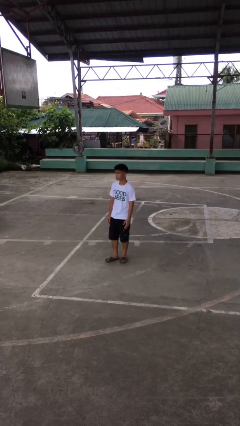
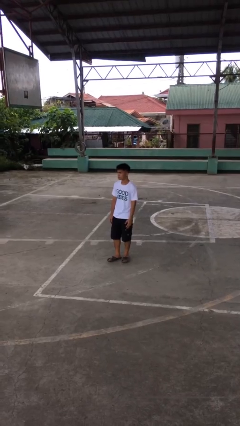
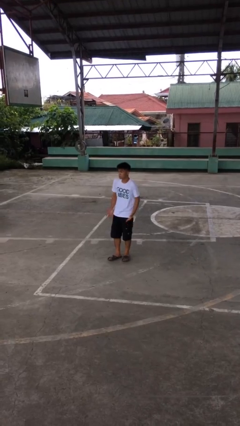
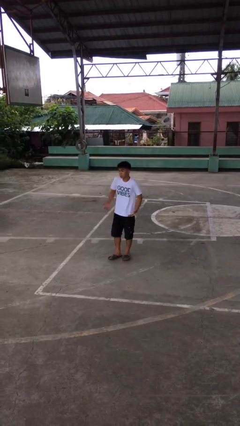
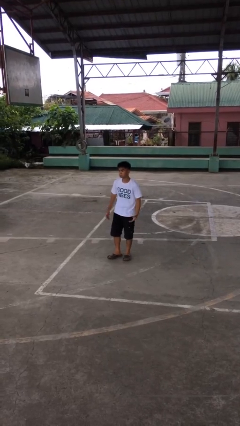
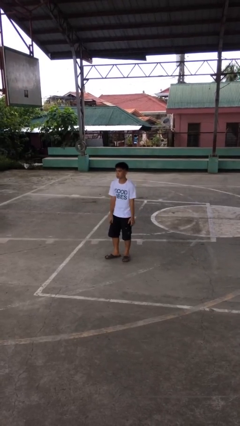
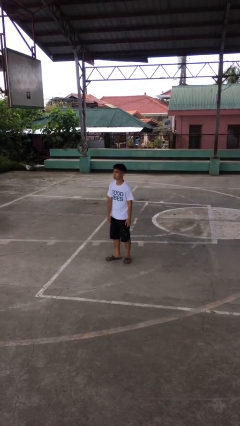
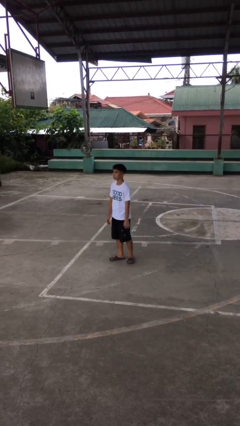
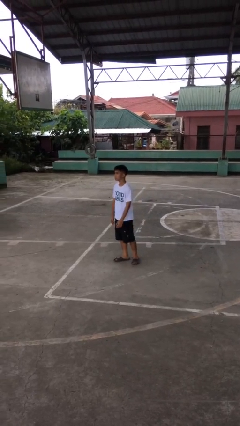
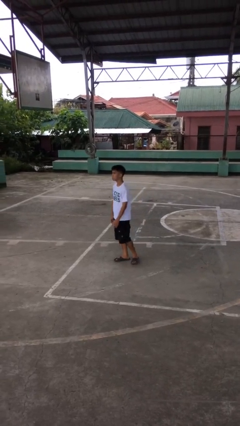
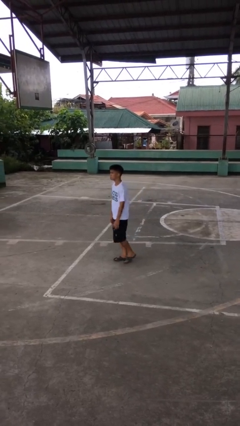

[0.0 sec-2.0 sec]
person shrugs

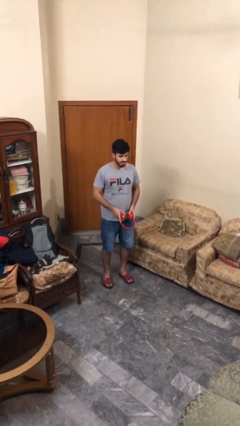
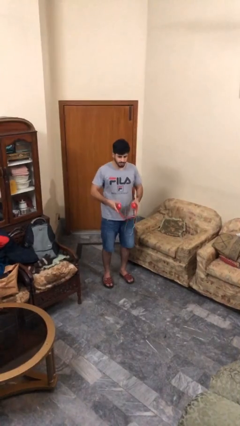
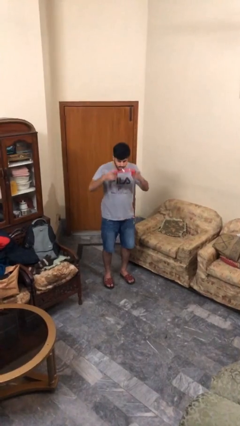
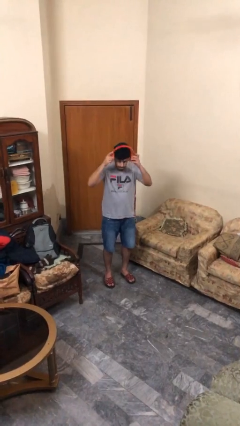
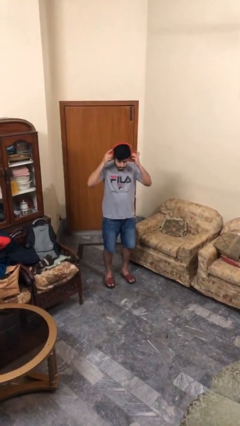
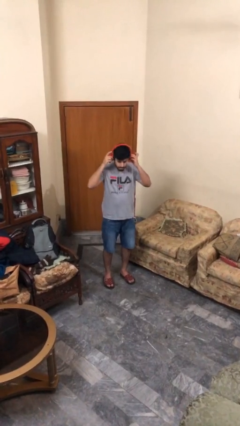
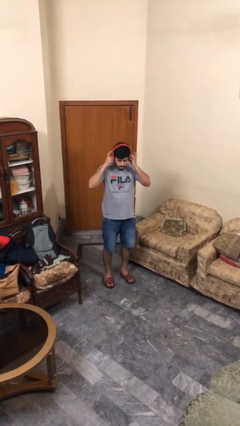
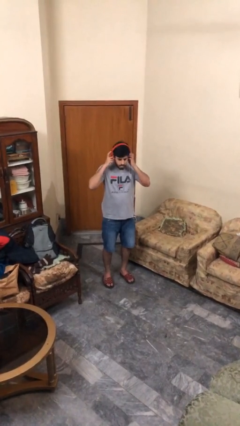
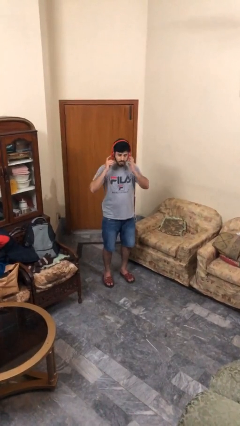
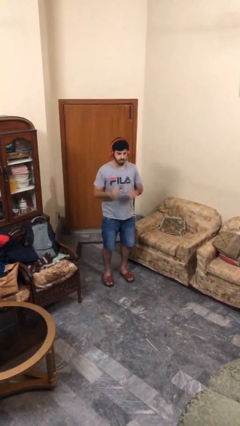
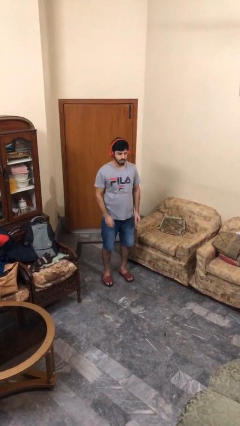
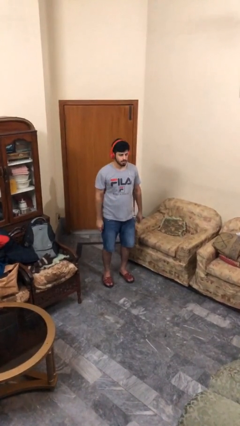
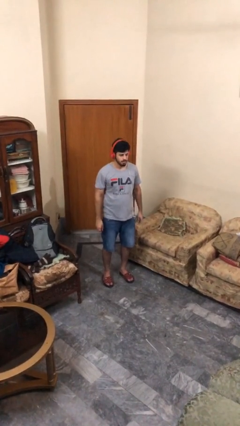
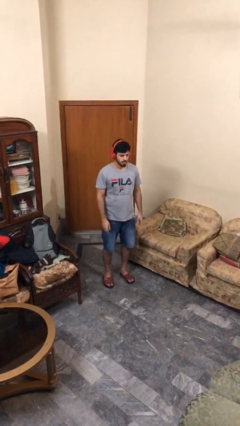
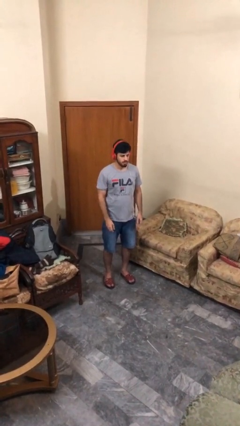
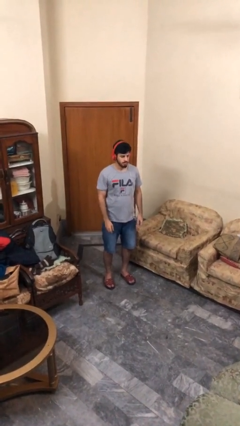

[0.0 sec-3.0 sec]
person puts on headphones

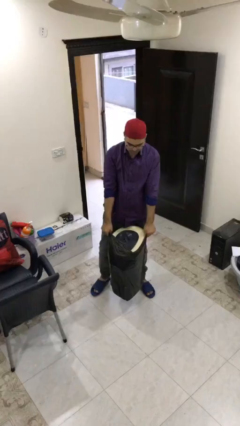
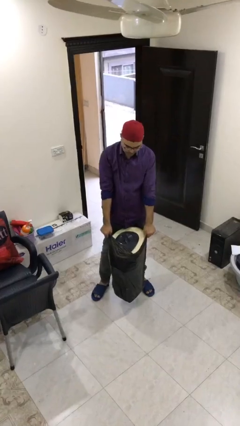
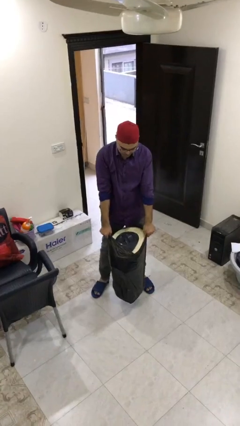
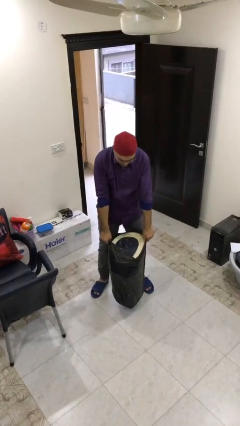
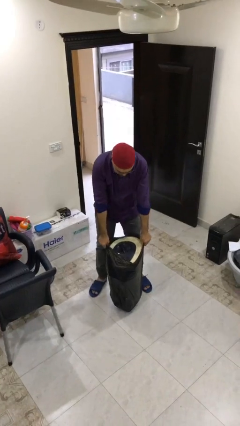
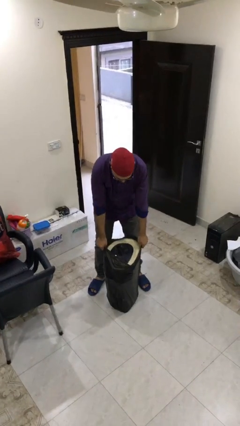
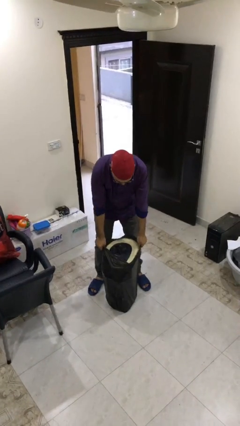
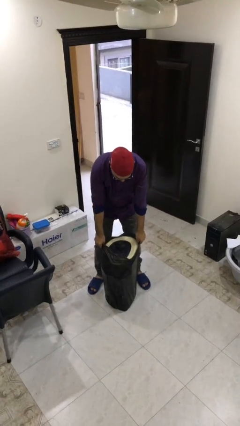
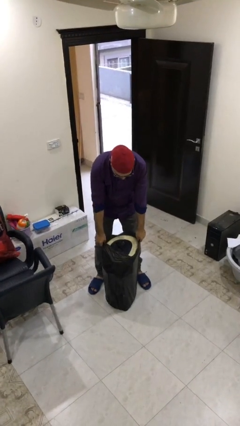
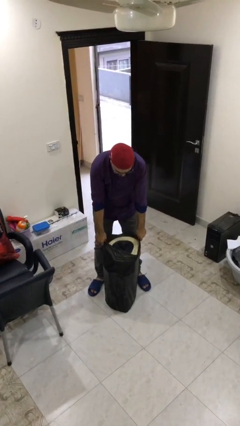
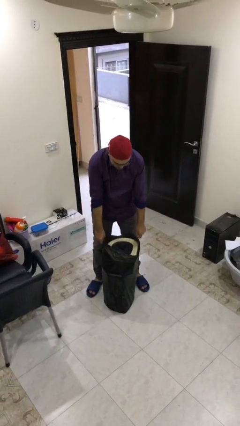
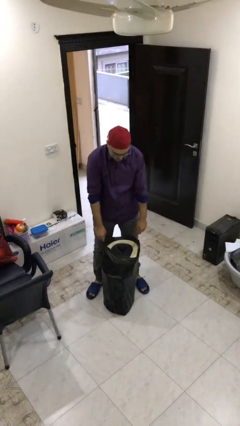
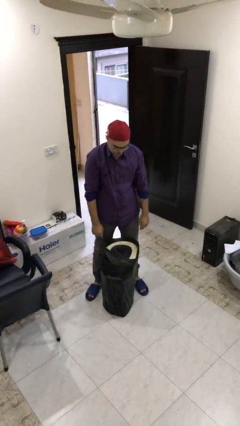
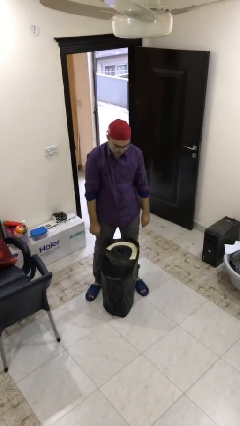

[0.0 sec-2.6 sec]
person puts down object on floor

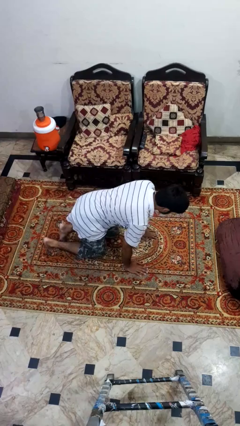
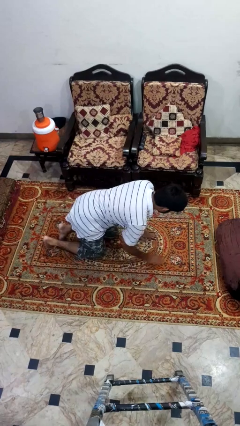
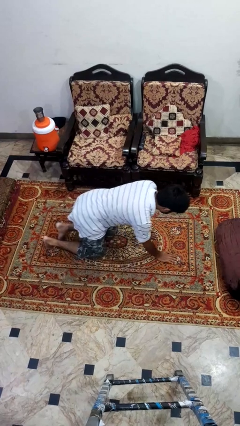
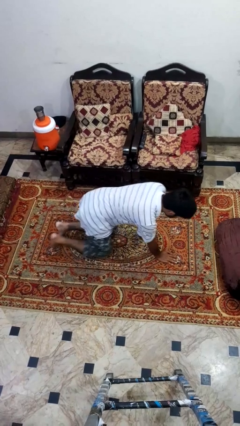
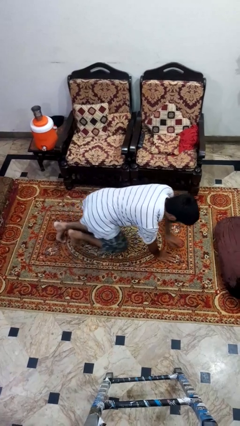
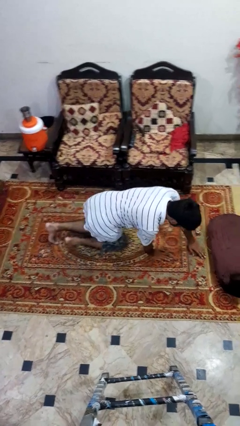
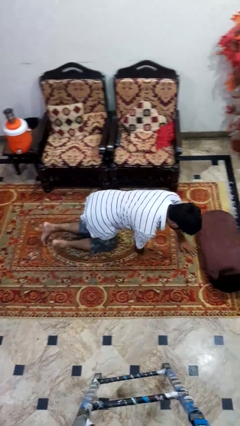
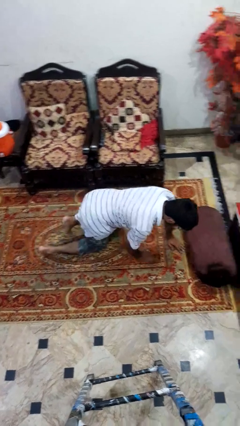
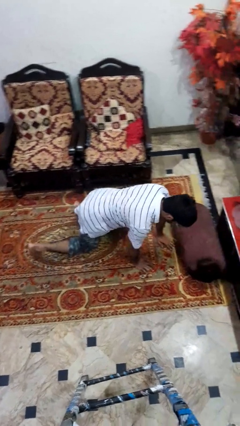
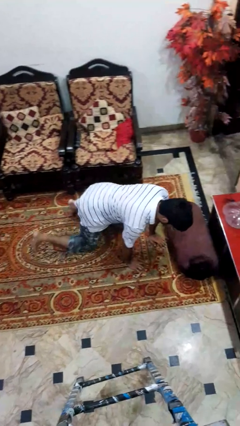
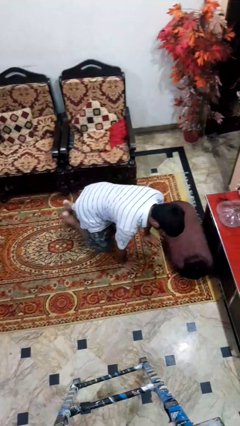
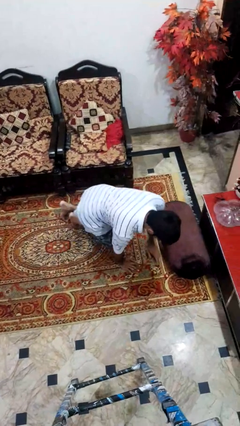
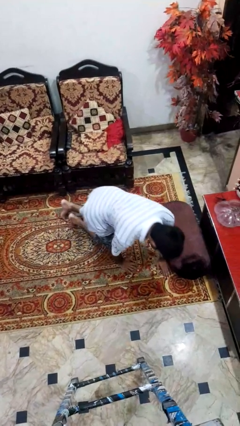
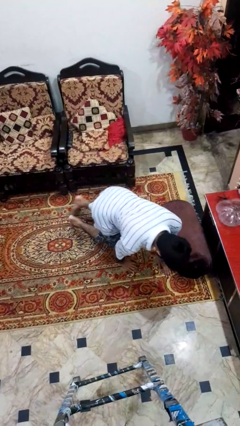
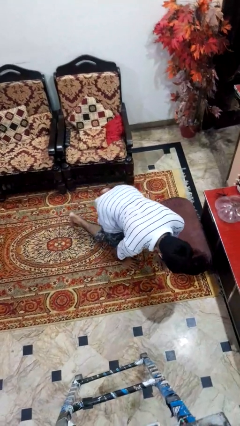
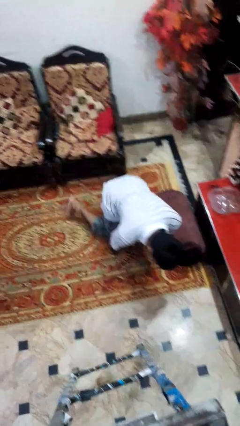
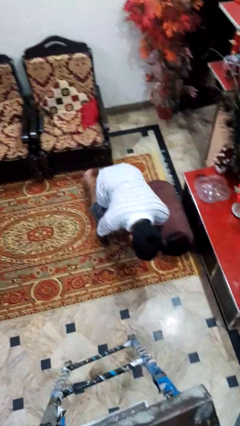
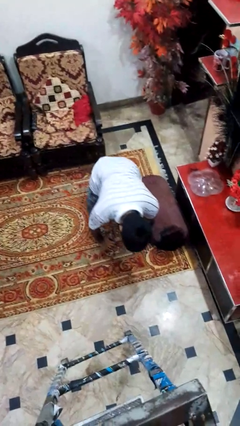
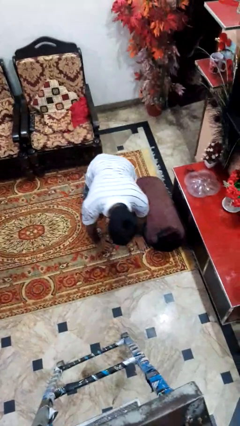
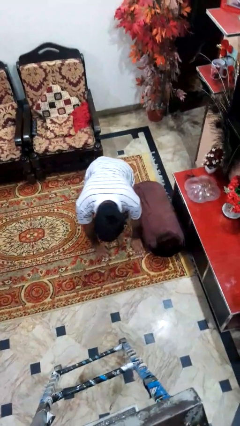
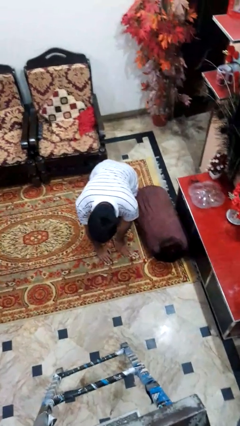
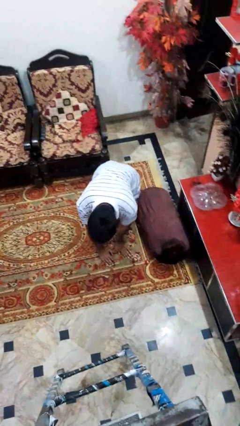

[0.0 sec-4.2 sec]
person crawls

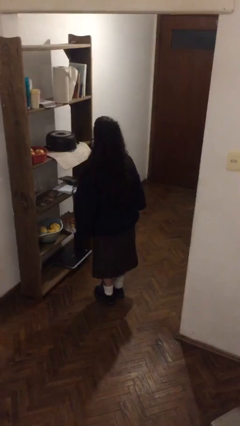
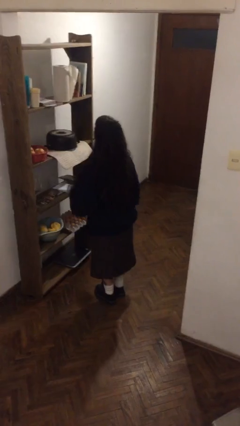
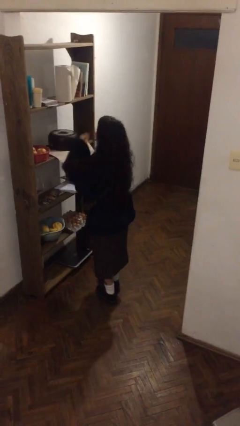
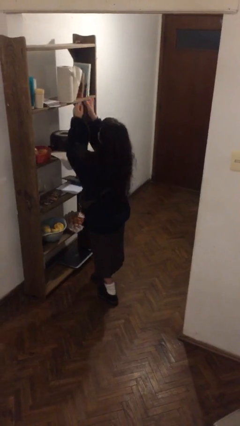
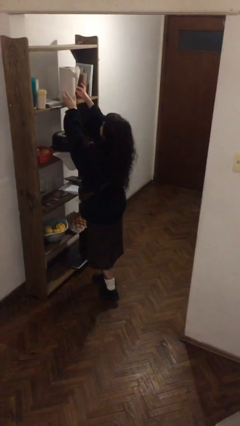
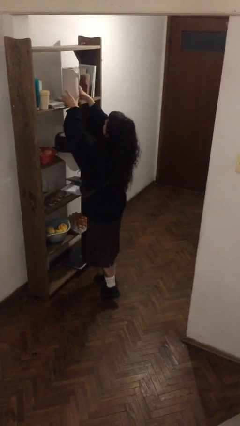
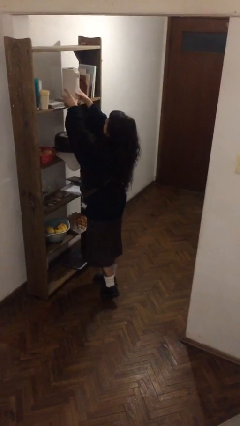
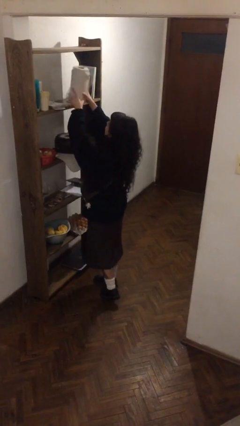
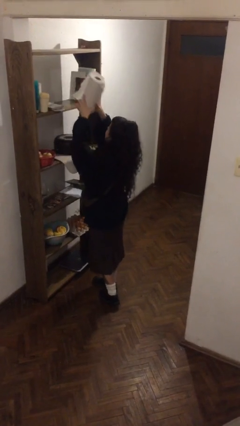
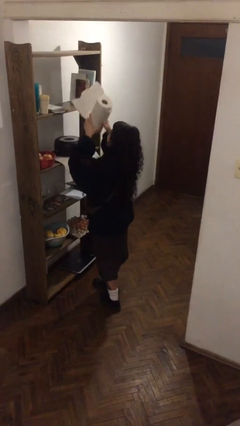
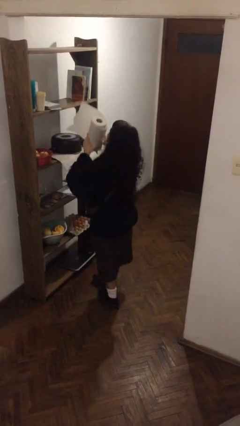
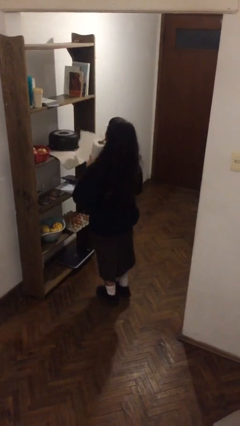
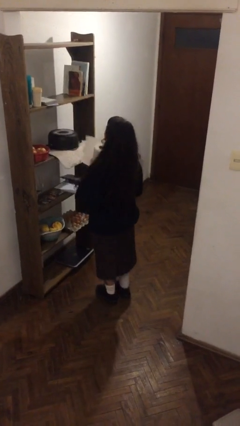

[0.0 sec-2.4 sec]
person picks up object from shelf

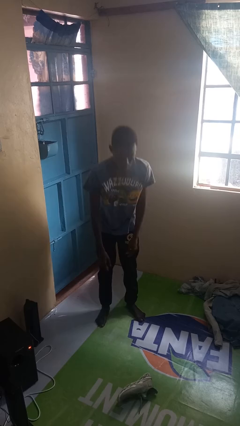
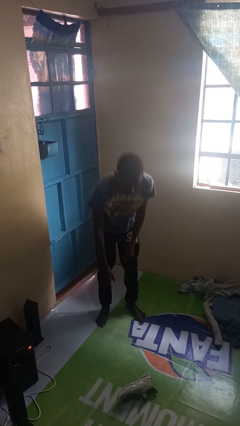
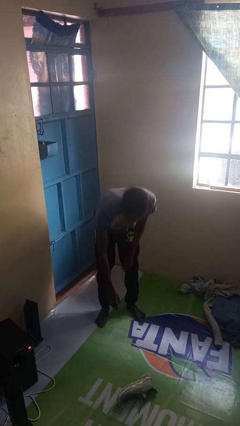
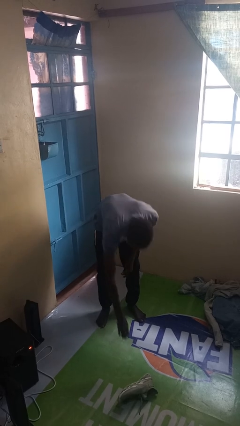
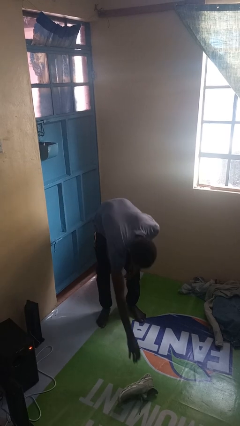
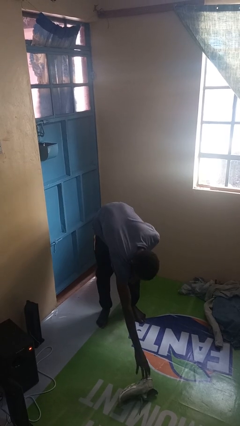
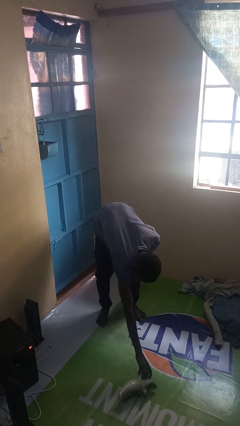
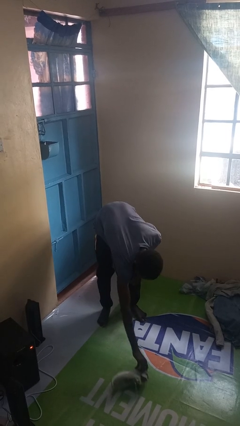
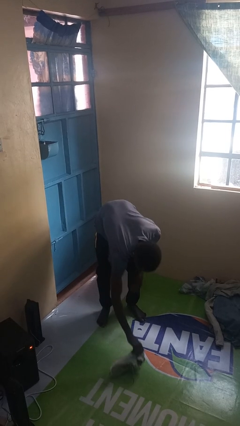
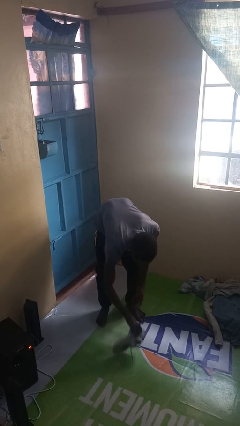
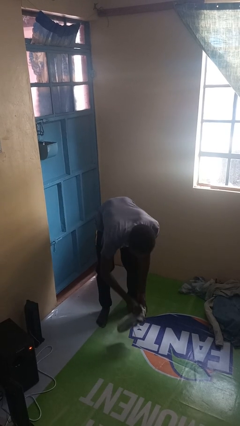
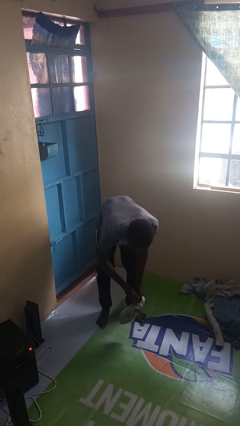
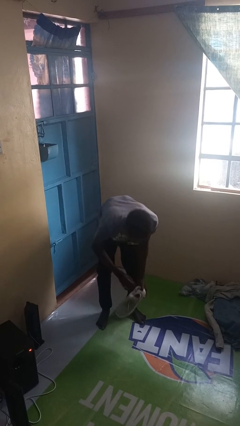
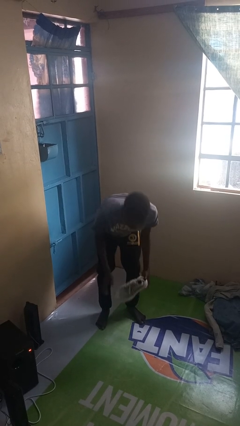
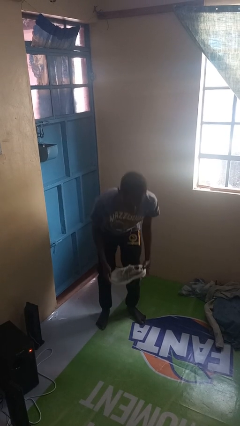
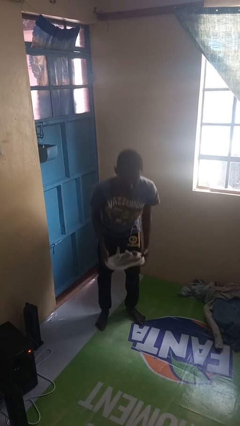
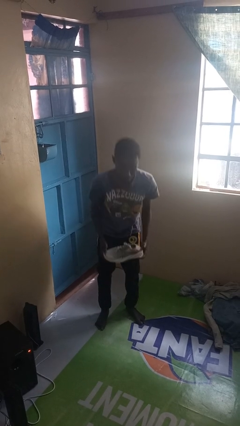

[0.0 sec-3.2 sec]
person picks up object from floor

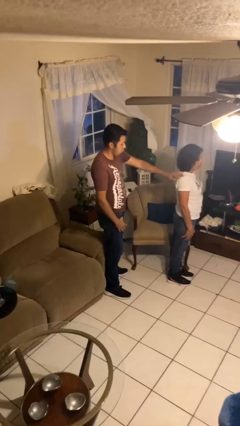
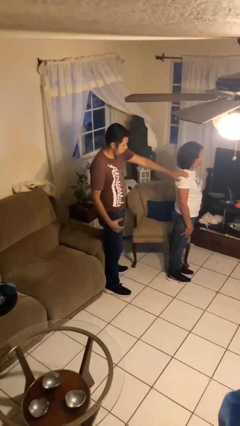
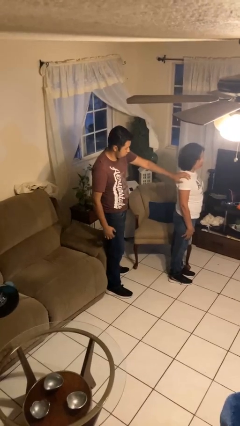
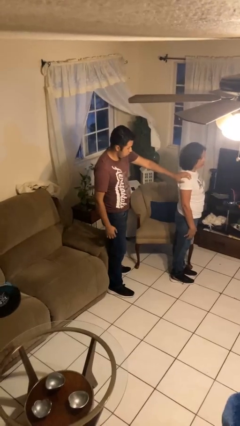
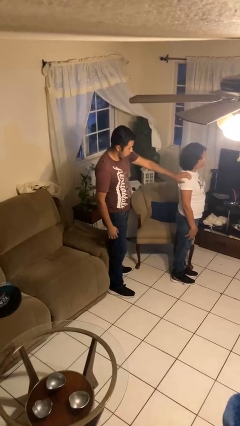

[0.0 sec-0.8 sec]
person grabs person by shoulder
